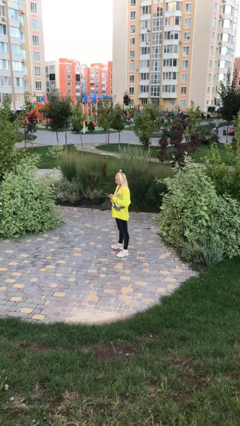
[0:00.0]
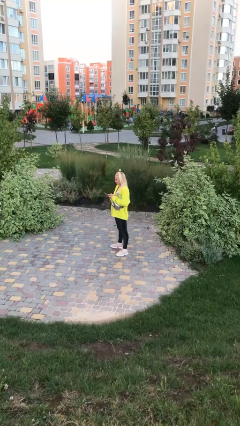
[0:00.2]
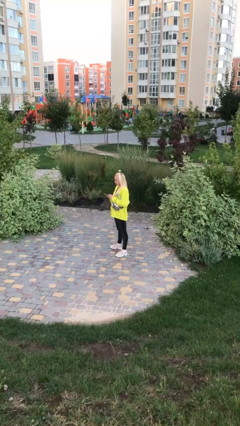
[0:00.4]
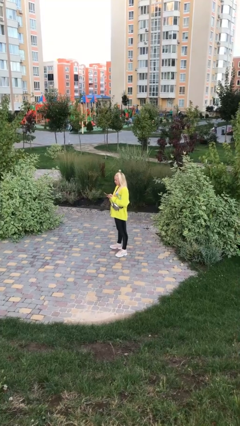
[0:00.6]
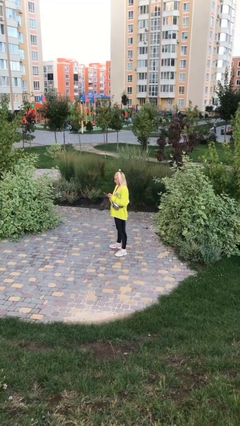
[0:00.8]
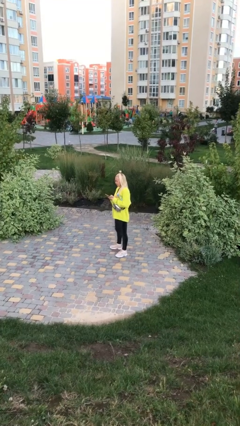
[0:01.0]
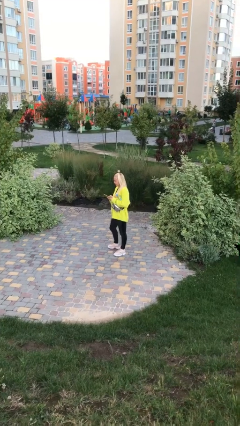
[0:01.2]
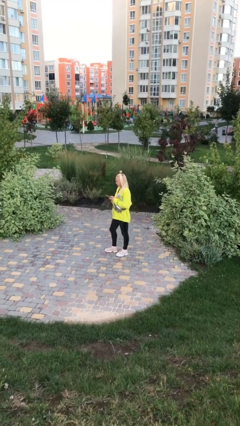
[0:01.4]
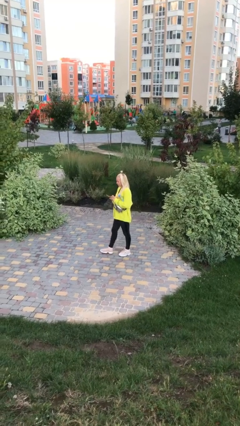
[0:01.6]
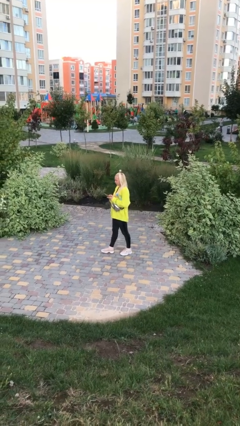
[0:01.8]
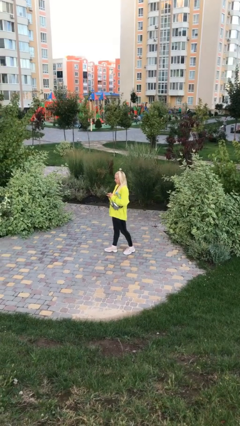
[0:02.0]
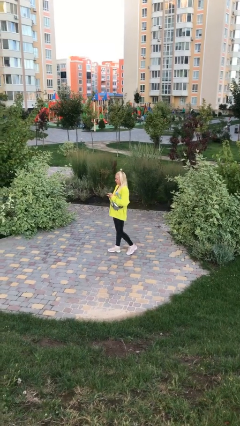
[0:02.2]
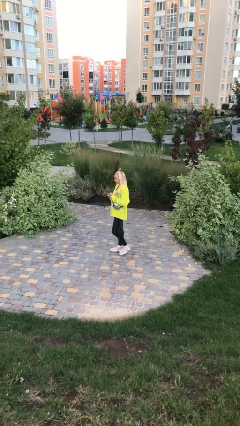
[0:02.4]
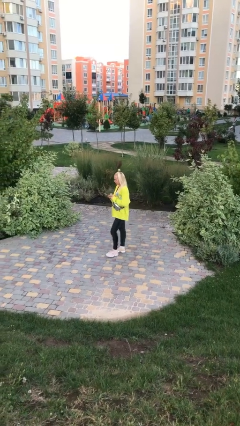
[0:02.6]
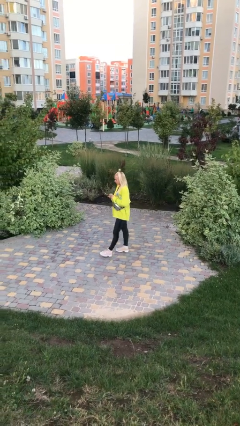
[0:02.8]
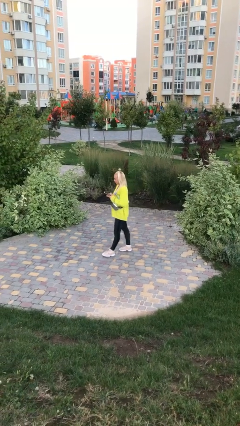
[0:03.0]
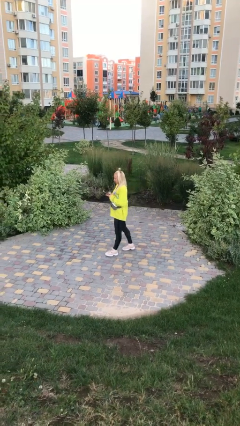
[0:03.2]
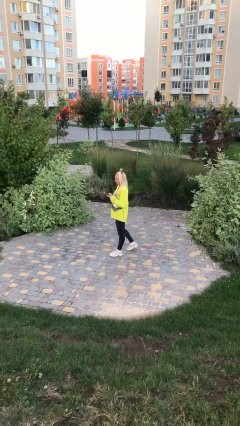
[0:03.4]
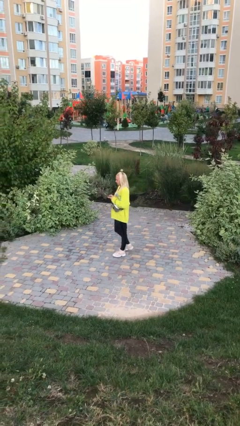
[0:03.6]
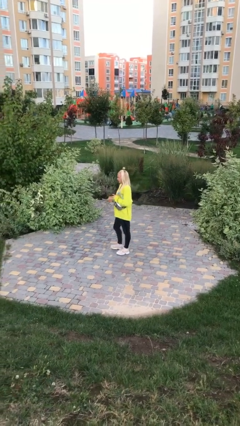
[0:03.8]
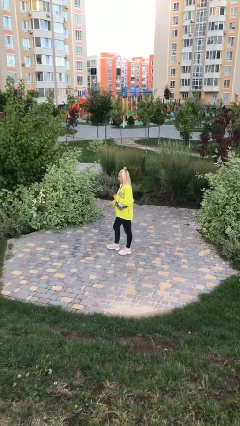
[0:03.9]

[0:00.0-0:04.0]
person texts on phone

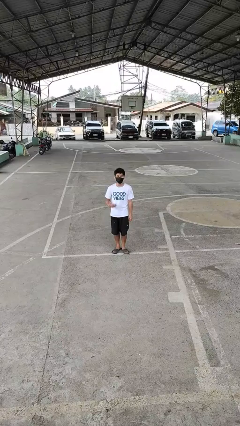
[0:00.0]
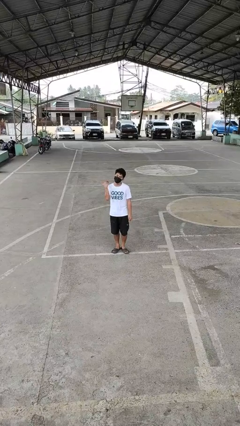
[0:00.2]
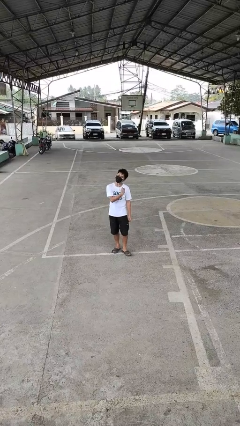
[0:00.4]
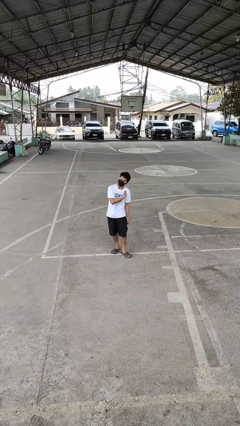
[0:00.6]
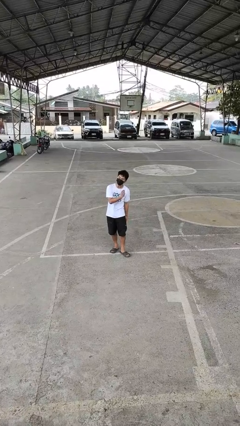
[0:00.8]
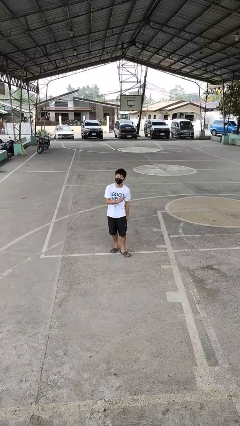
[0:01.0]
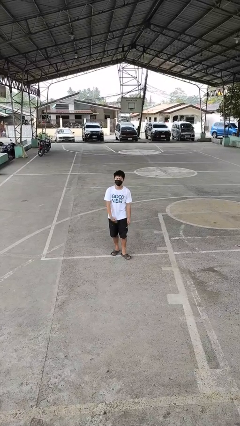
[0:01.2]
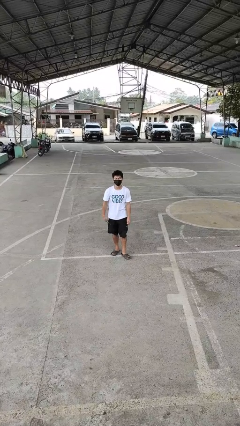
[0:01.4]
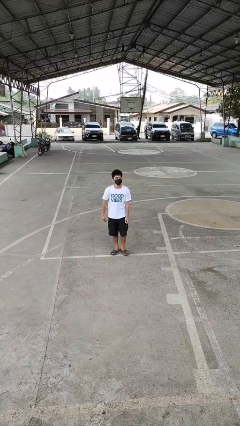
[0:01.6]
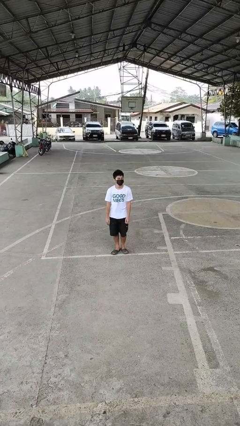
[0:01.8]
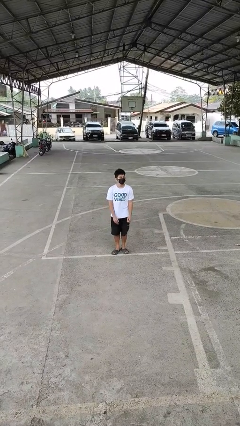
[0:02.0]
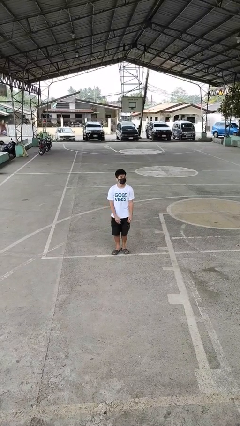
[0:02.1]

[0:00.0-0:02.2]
person gestures cut

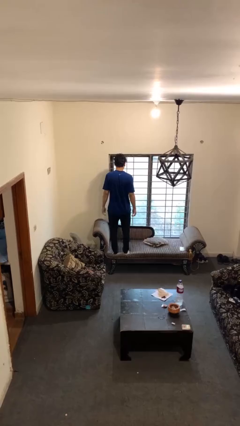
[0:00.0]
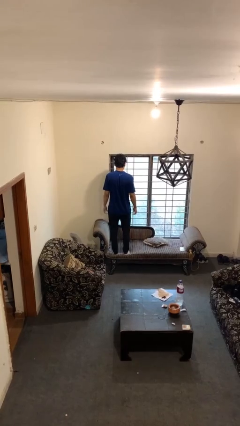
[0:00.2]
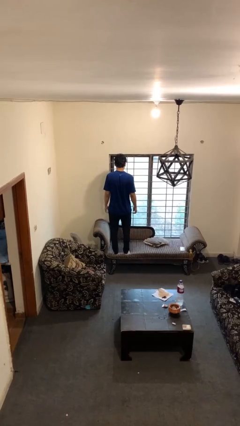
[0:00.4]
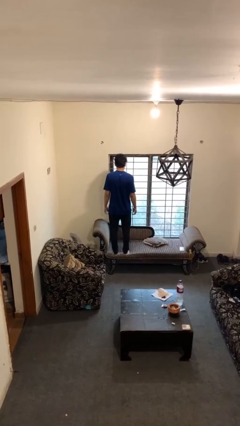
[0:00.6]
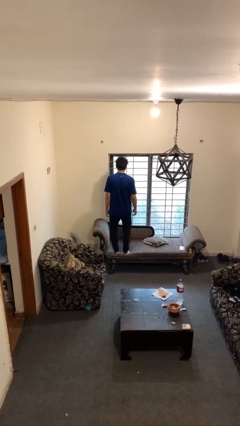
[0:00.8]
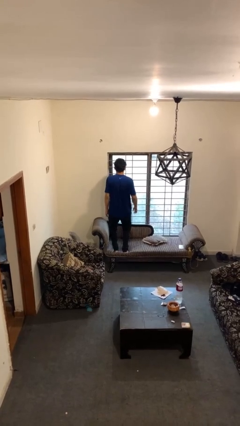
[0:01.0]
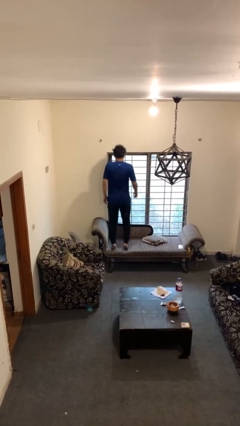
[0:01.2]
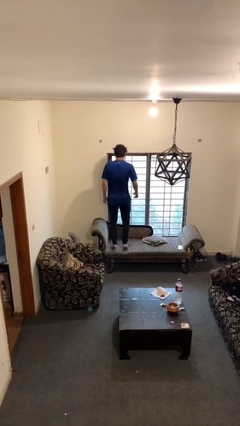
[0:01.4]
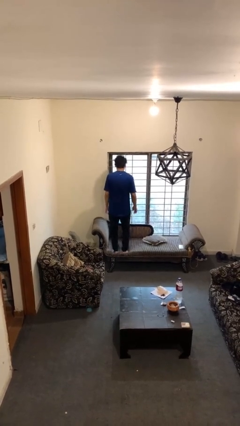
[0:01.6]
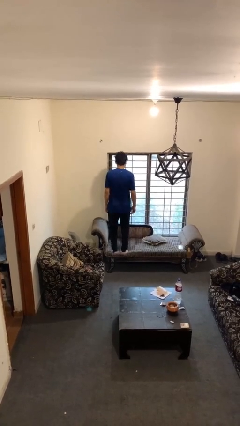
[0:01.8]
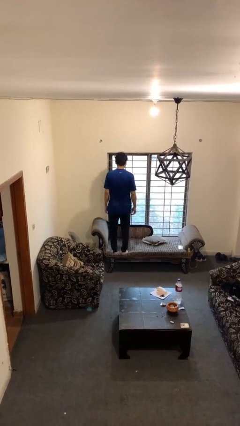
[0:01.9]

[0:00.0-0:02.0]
person jumps on couch

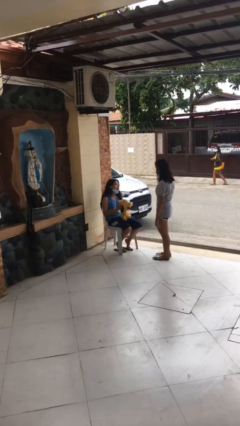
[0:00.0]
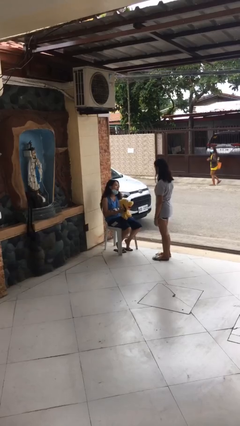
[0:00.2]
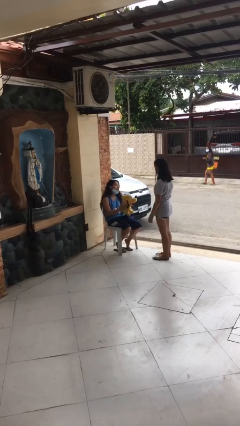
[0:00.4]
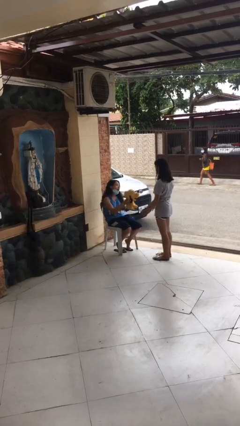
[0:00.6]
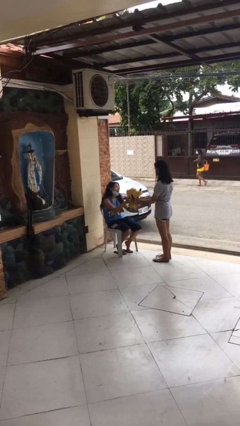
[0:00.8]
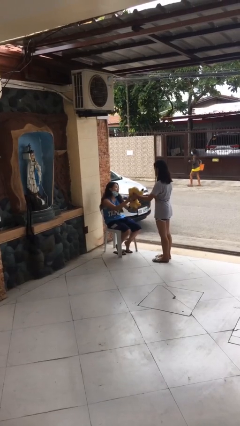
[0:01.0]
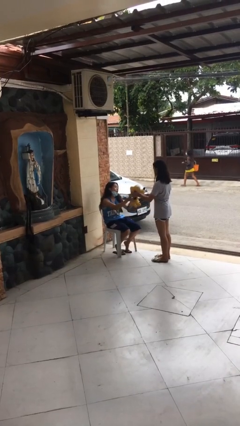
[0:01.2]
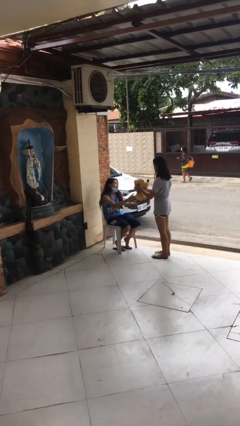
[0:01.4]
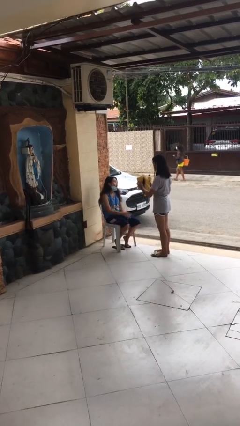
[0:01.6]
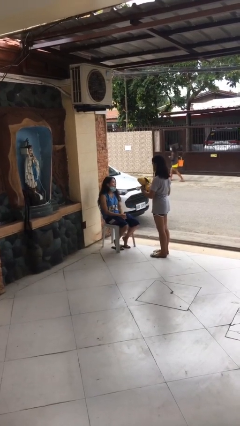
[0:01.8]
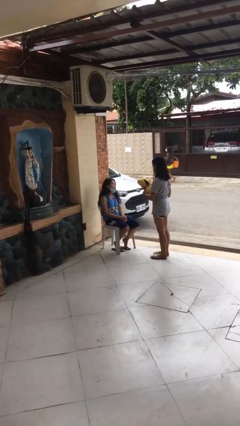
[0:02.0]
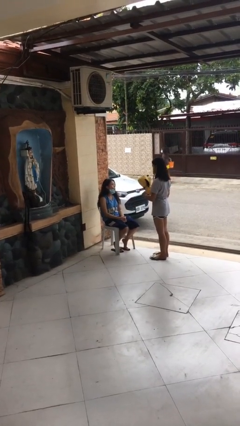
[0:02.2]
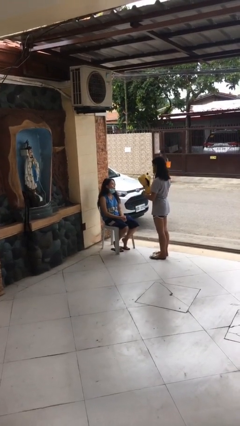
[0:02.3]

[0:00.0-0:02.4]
person transfers object to person

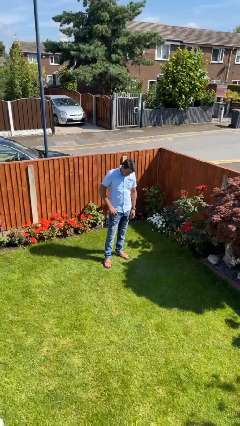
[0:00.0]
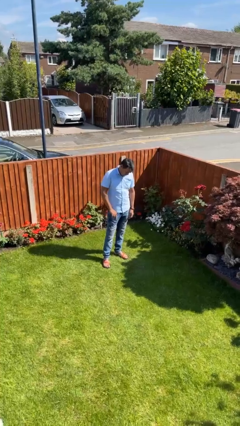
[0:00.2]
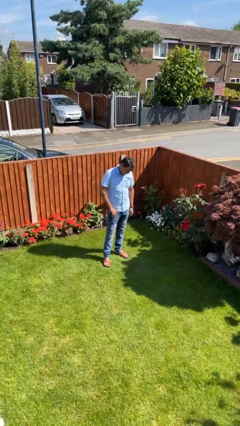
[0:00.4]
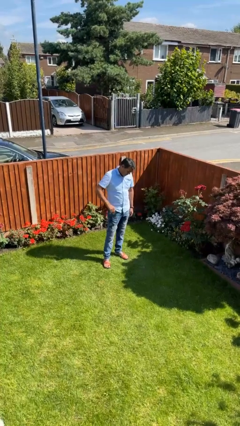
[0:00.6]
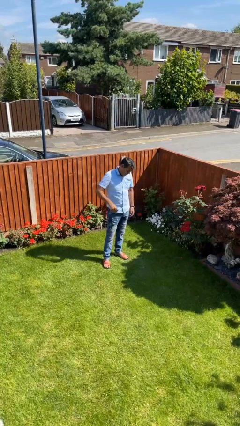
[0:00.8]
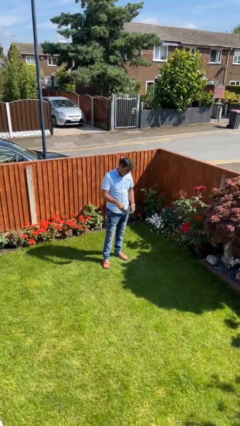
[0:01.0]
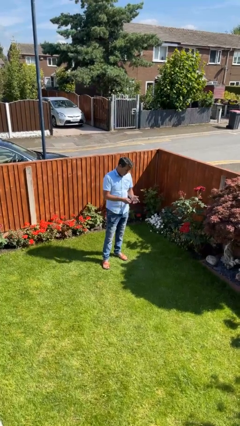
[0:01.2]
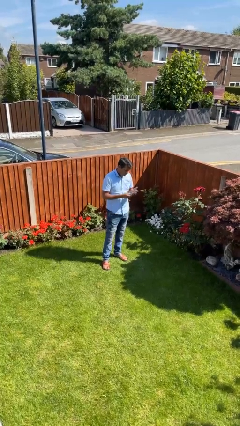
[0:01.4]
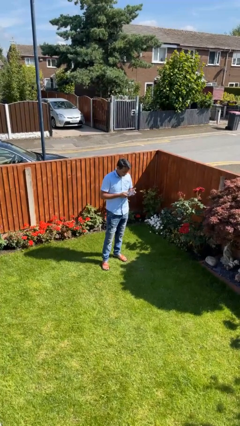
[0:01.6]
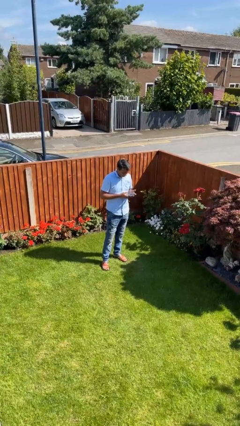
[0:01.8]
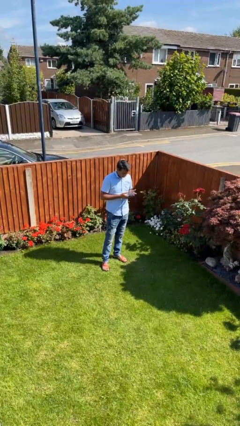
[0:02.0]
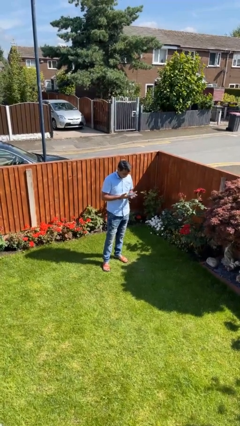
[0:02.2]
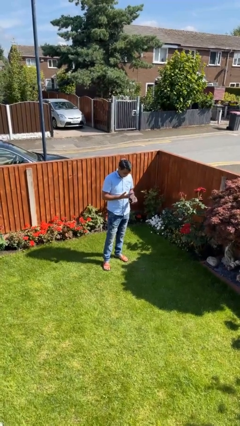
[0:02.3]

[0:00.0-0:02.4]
person takes phone from pocket

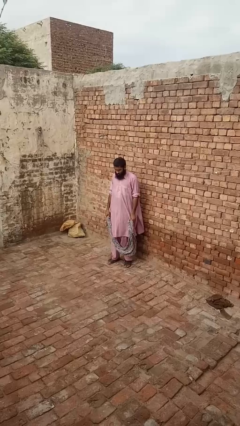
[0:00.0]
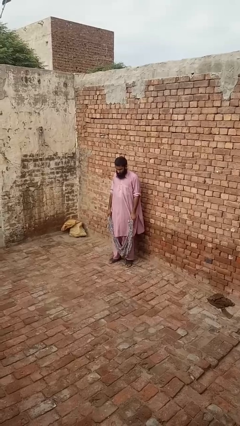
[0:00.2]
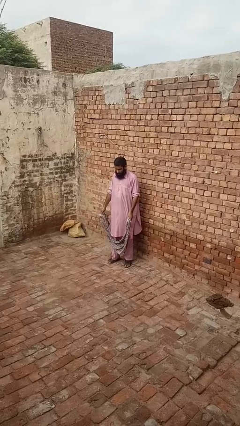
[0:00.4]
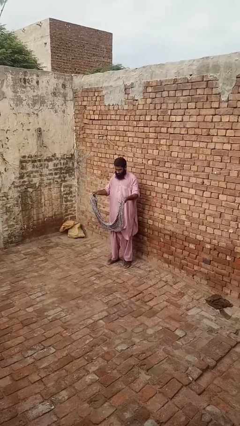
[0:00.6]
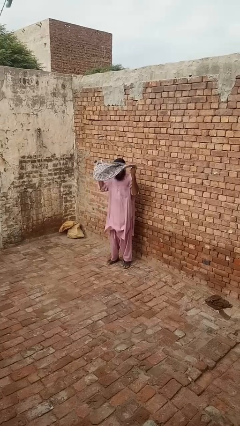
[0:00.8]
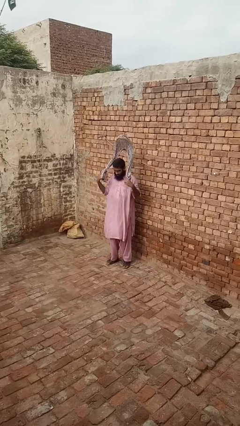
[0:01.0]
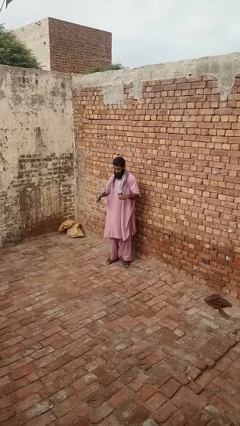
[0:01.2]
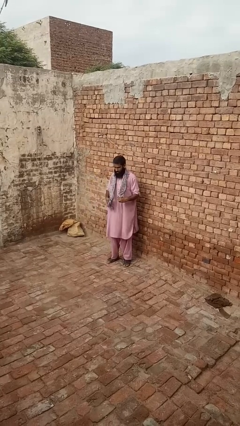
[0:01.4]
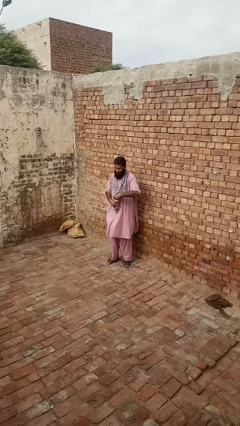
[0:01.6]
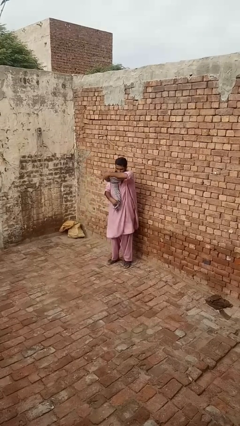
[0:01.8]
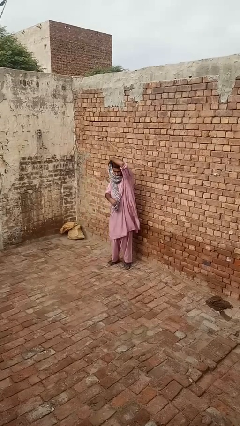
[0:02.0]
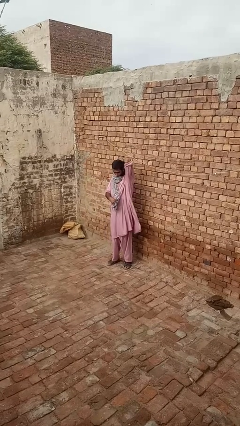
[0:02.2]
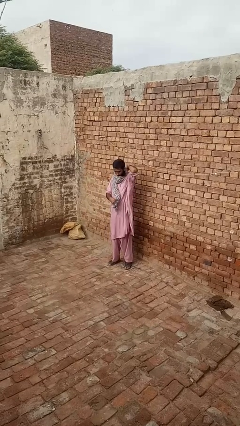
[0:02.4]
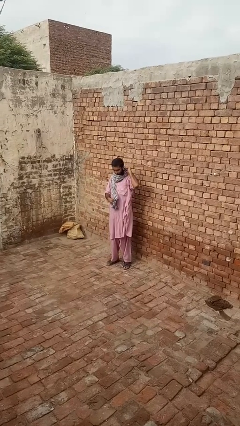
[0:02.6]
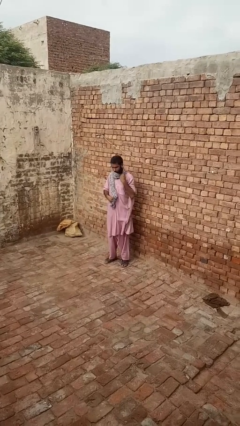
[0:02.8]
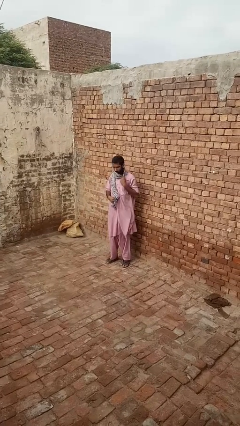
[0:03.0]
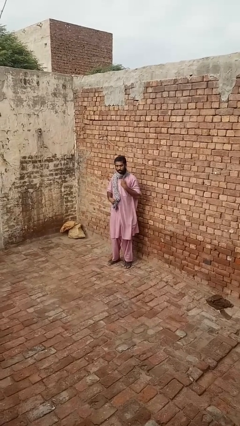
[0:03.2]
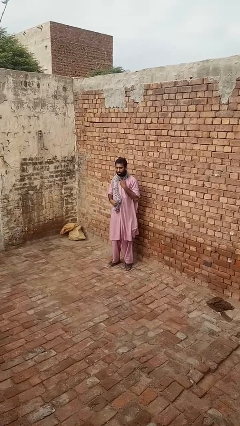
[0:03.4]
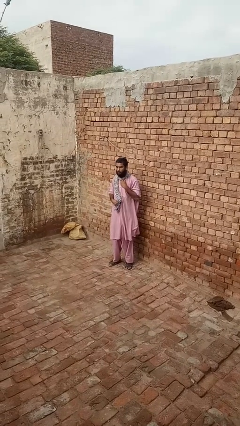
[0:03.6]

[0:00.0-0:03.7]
person puts on scarf

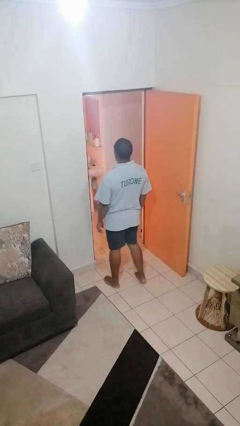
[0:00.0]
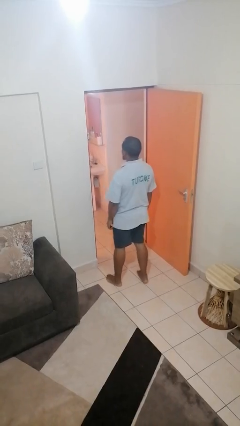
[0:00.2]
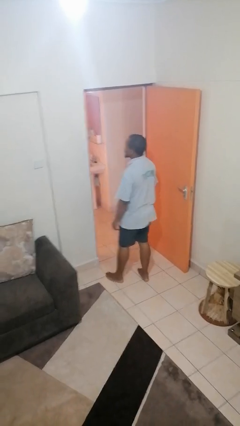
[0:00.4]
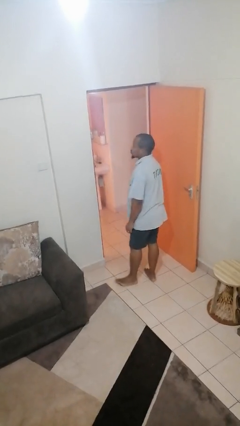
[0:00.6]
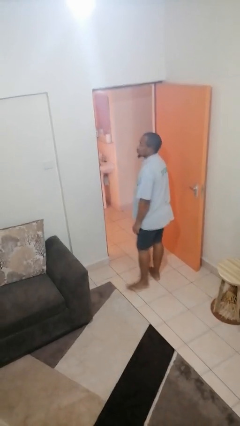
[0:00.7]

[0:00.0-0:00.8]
person kneels
